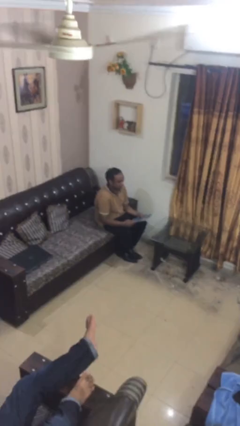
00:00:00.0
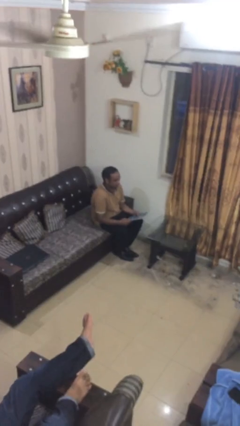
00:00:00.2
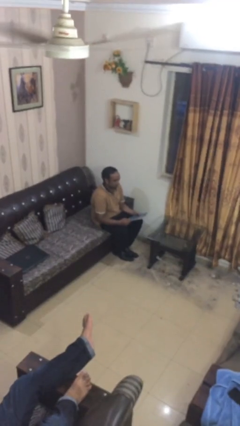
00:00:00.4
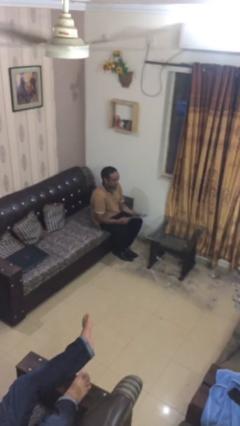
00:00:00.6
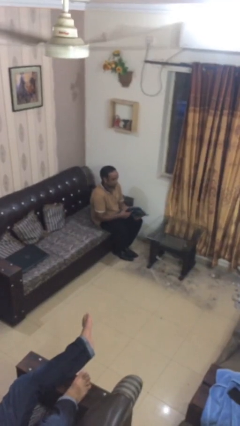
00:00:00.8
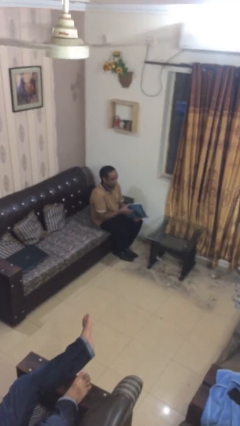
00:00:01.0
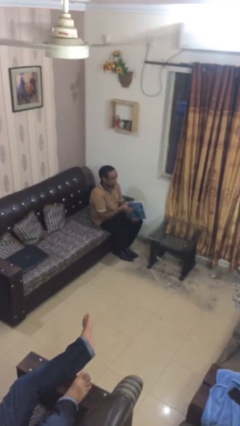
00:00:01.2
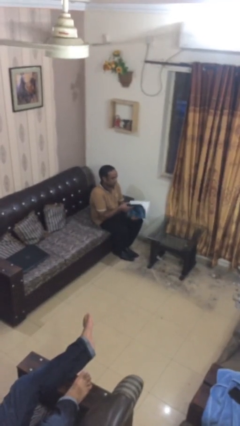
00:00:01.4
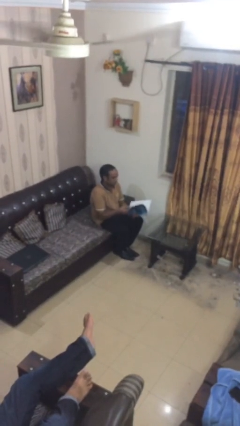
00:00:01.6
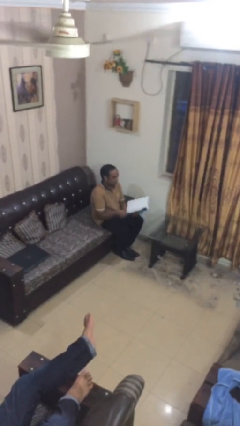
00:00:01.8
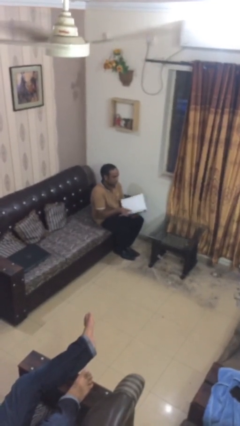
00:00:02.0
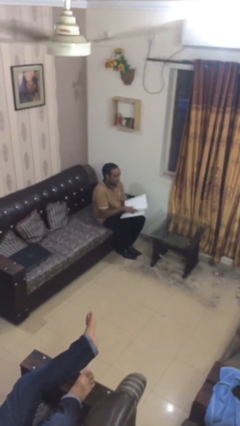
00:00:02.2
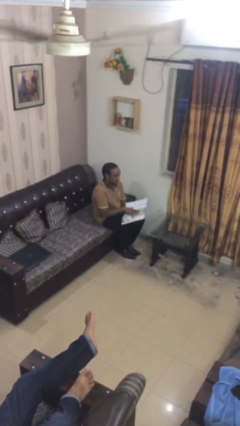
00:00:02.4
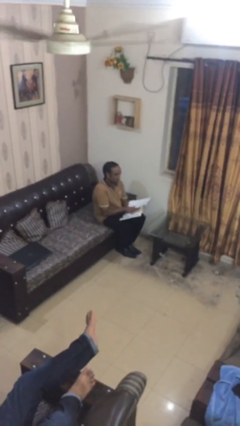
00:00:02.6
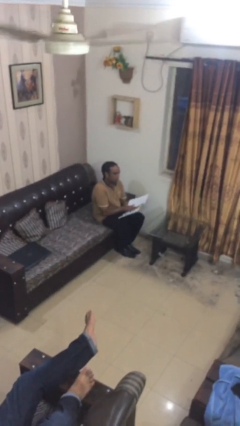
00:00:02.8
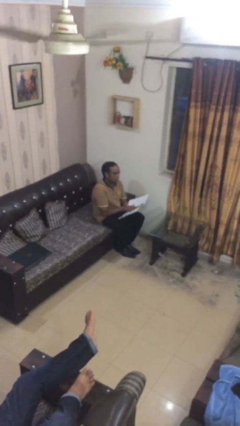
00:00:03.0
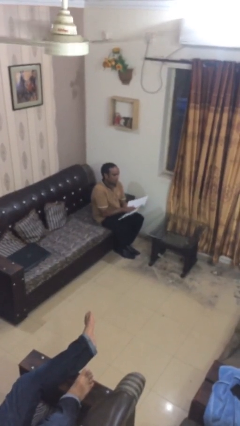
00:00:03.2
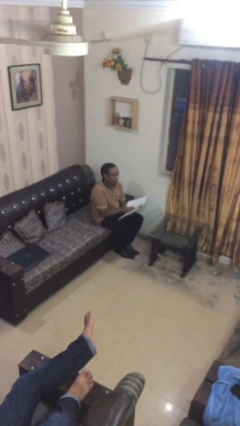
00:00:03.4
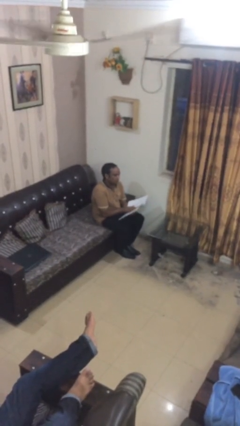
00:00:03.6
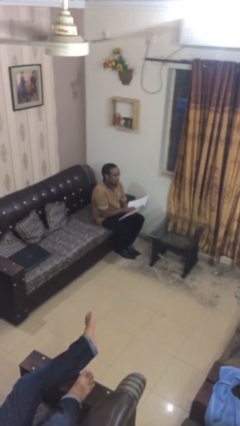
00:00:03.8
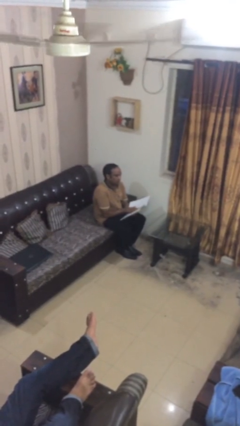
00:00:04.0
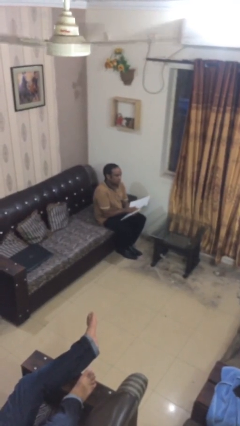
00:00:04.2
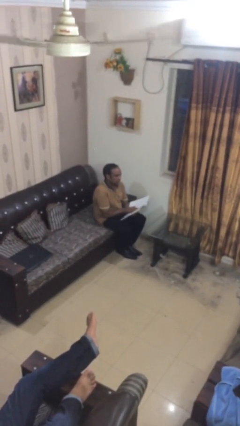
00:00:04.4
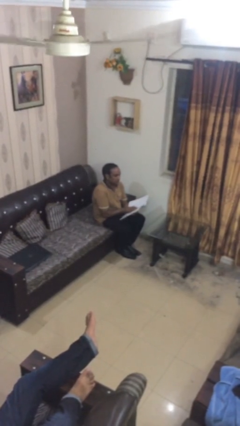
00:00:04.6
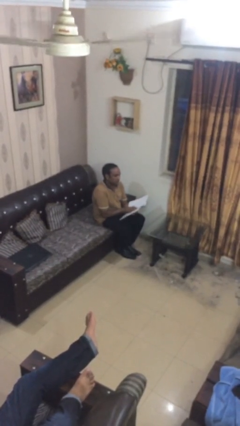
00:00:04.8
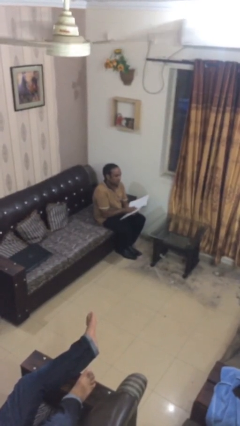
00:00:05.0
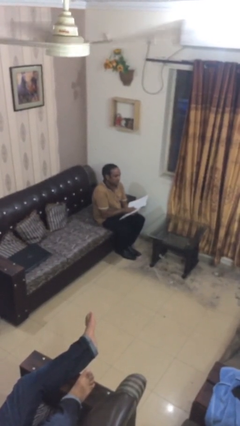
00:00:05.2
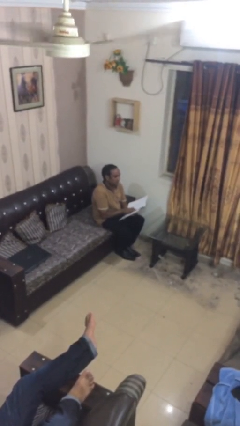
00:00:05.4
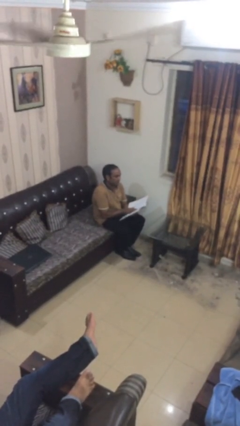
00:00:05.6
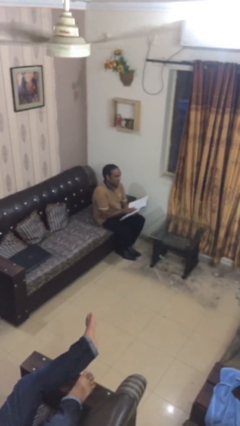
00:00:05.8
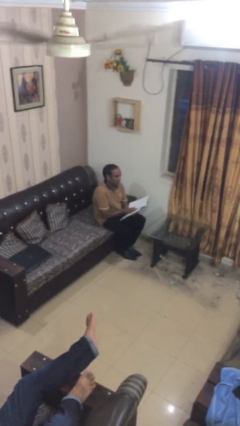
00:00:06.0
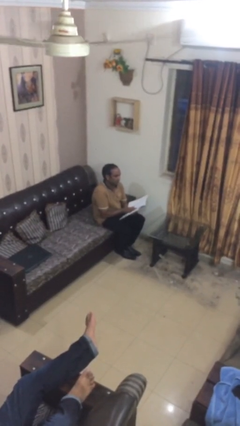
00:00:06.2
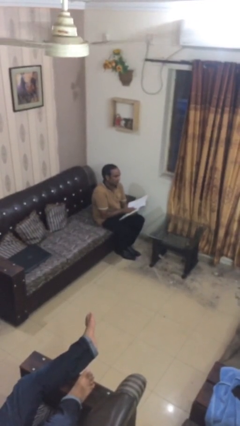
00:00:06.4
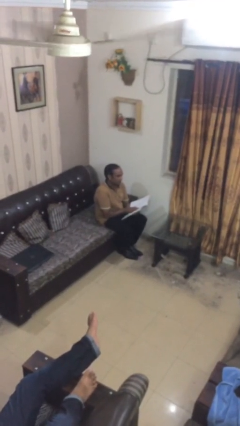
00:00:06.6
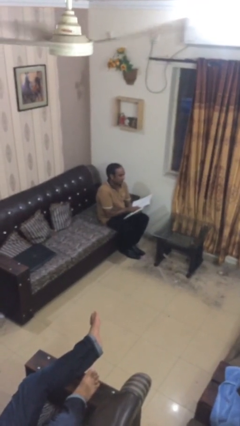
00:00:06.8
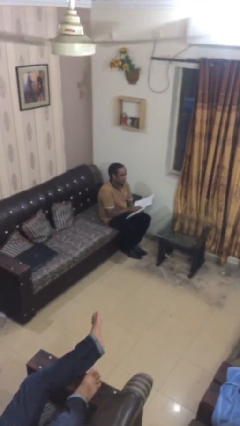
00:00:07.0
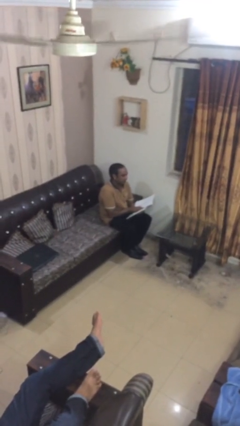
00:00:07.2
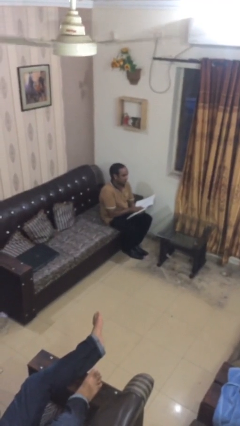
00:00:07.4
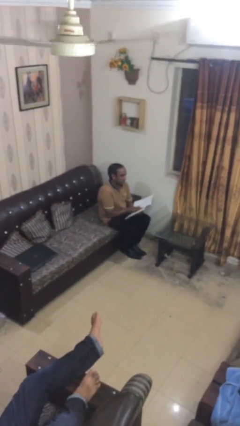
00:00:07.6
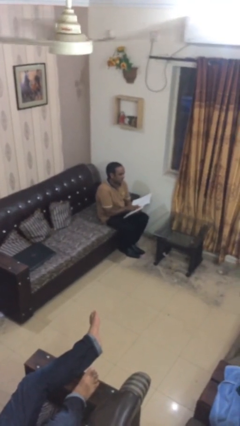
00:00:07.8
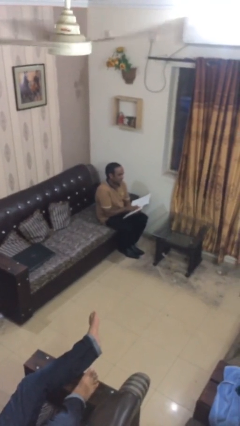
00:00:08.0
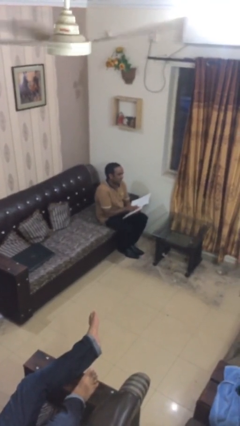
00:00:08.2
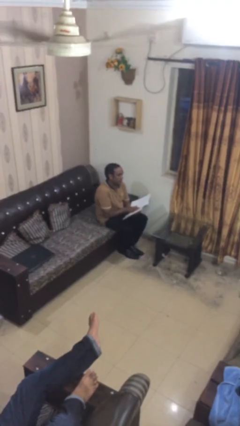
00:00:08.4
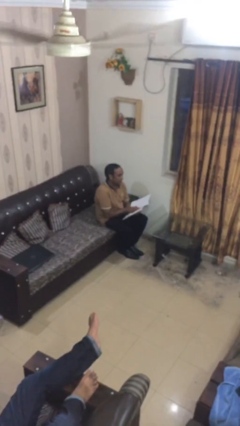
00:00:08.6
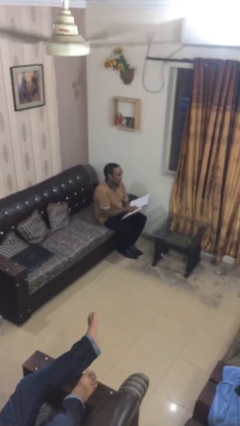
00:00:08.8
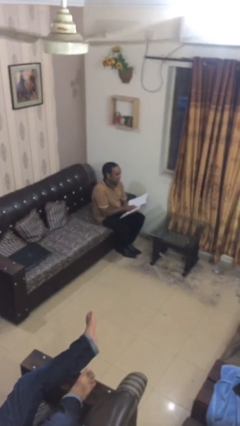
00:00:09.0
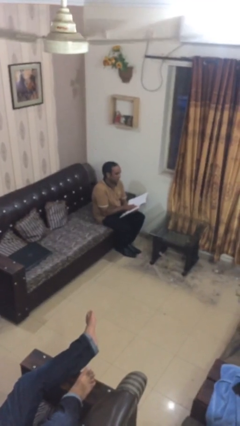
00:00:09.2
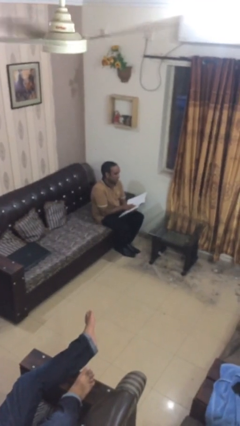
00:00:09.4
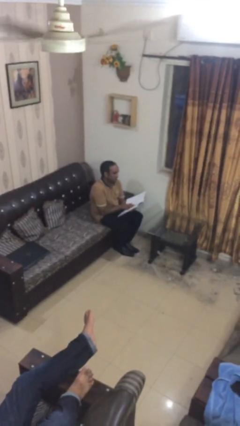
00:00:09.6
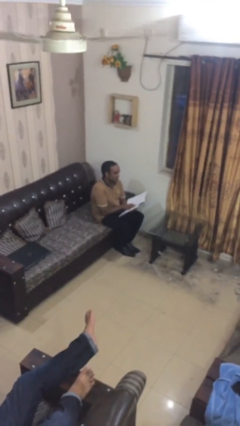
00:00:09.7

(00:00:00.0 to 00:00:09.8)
person reads document

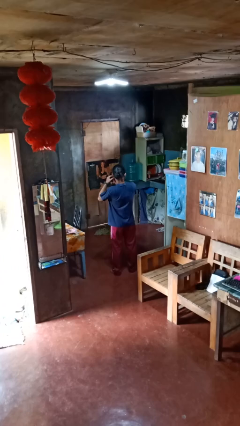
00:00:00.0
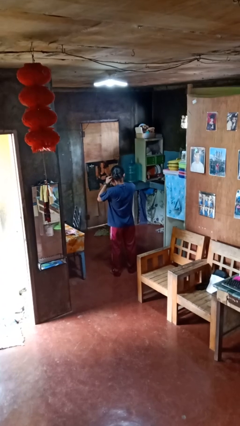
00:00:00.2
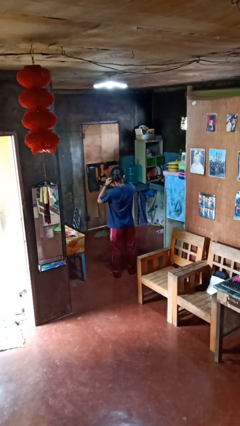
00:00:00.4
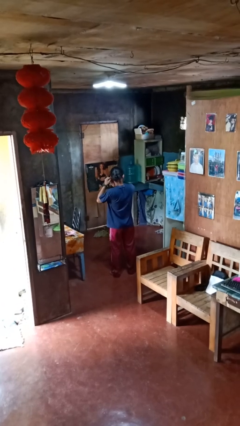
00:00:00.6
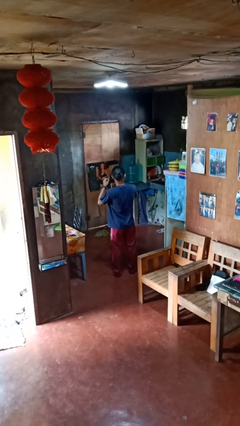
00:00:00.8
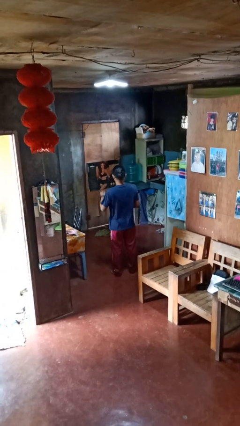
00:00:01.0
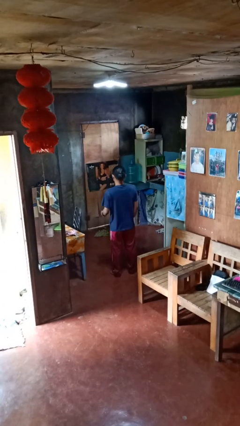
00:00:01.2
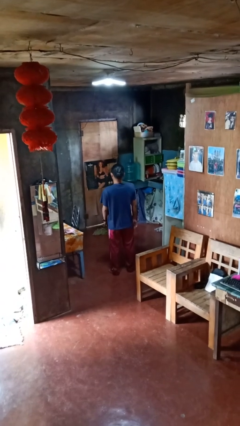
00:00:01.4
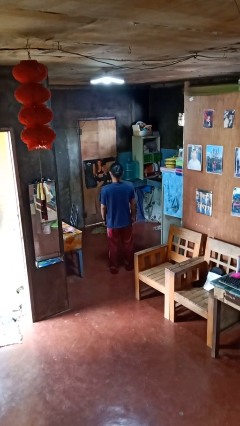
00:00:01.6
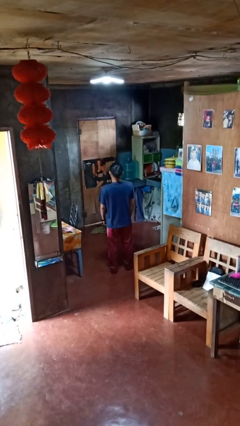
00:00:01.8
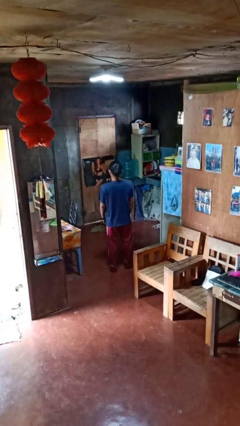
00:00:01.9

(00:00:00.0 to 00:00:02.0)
person takes off earrings

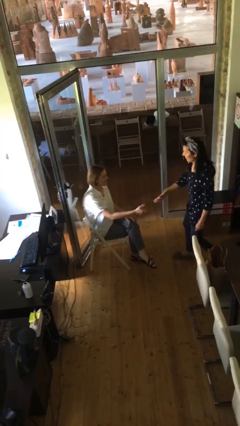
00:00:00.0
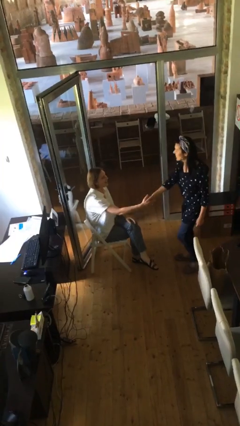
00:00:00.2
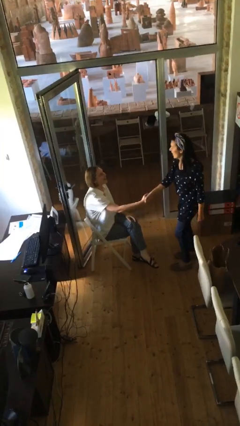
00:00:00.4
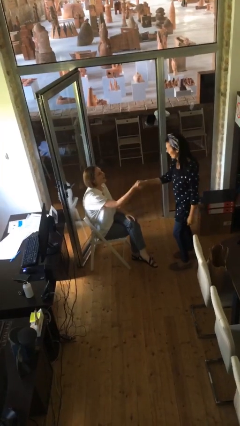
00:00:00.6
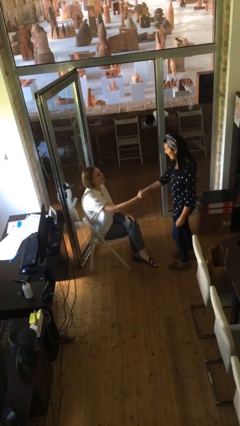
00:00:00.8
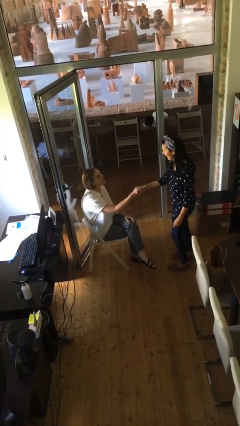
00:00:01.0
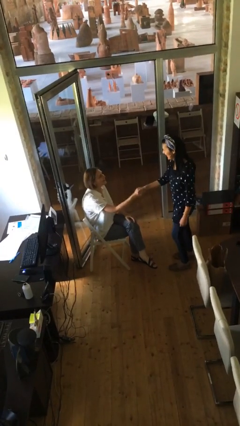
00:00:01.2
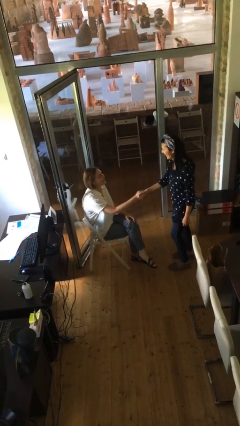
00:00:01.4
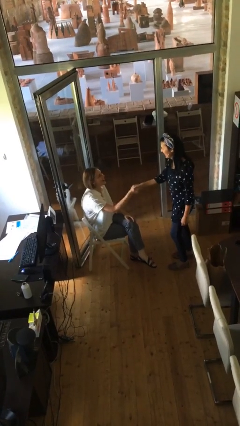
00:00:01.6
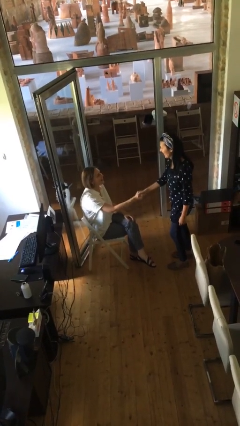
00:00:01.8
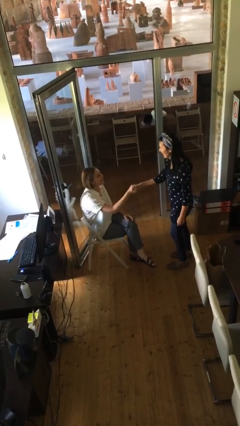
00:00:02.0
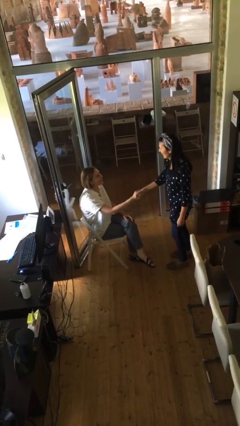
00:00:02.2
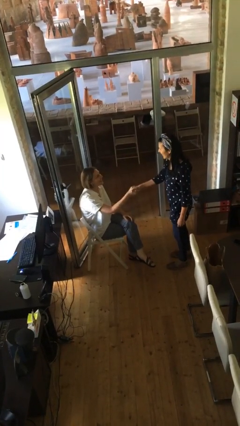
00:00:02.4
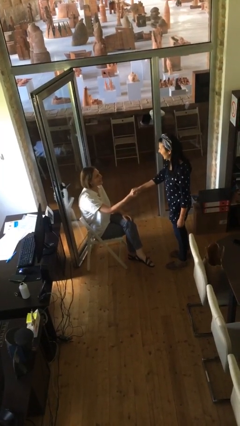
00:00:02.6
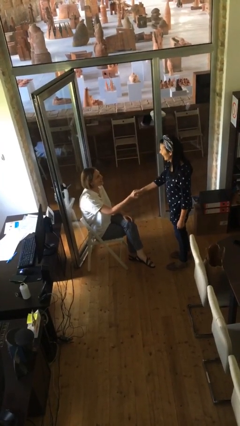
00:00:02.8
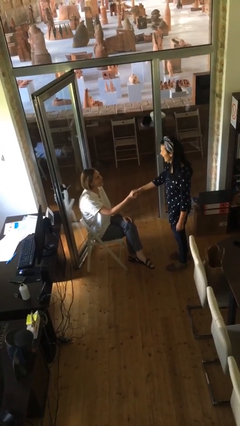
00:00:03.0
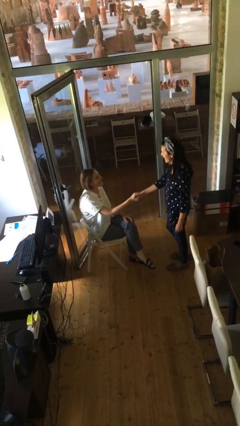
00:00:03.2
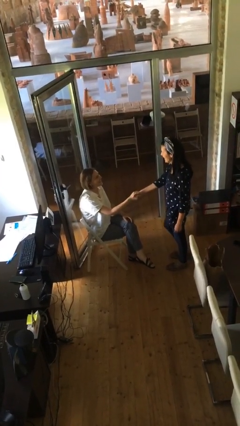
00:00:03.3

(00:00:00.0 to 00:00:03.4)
person shakes hand

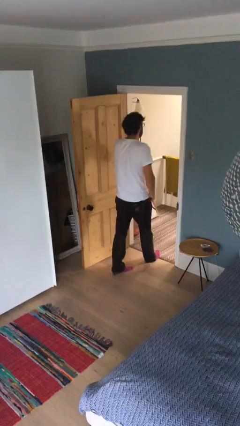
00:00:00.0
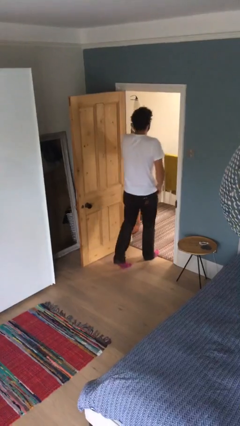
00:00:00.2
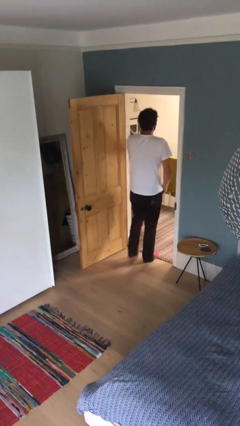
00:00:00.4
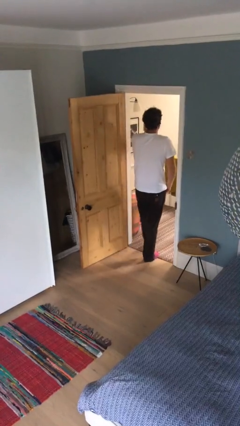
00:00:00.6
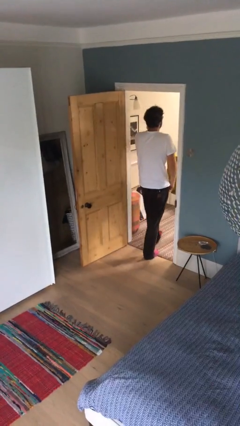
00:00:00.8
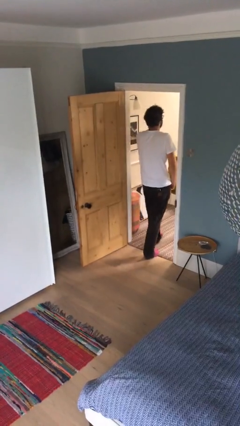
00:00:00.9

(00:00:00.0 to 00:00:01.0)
person exits scene through structure

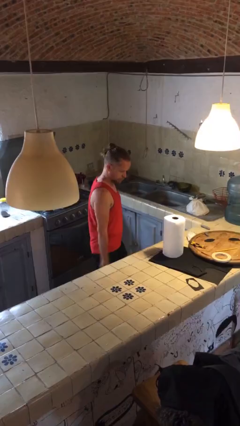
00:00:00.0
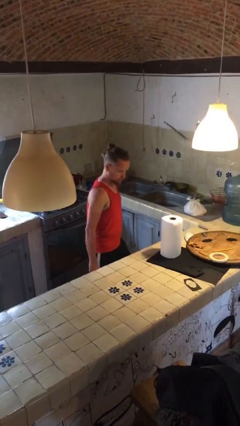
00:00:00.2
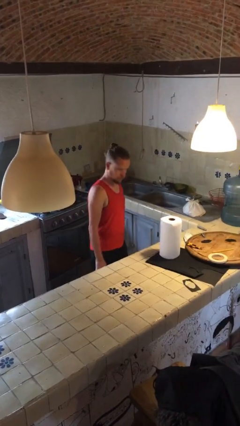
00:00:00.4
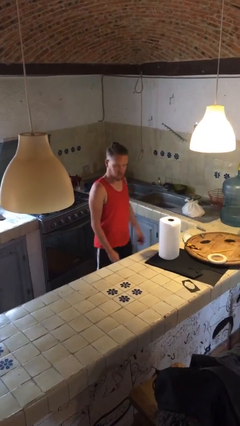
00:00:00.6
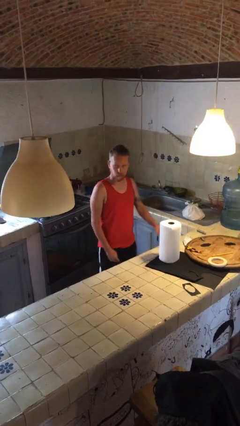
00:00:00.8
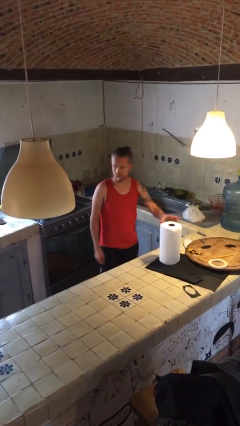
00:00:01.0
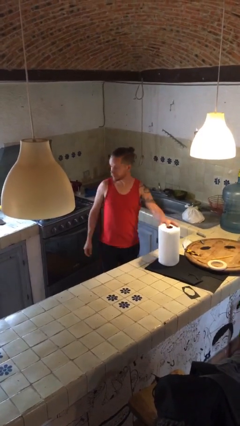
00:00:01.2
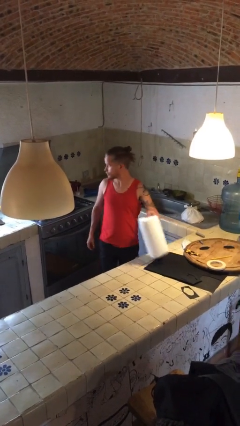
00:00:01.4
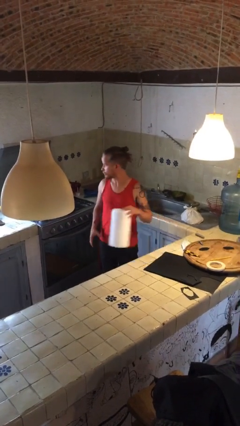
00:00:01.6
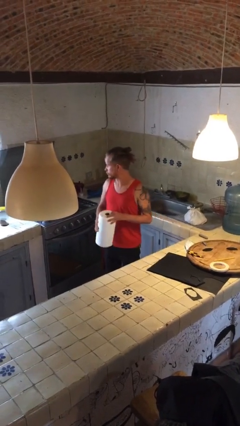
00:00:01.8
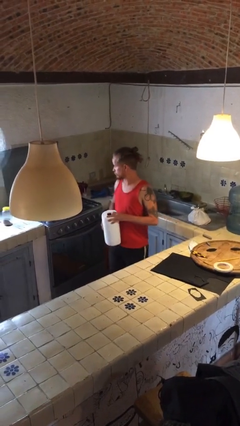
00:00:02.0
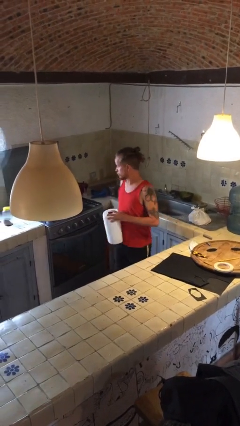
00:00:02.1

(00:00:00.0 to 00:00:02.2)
person picks up object from countertop
